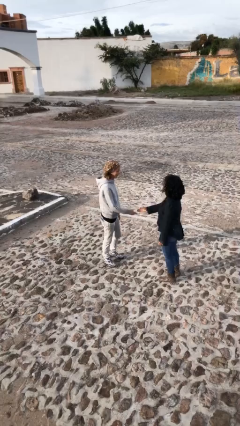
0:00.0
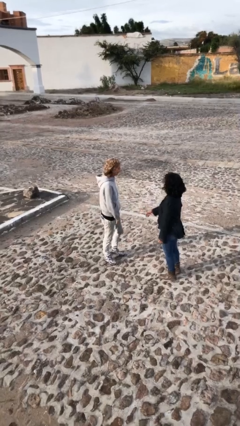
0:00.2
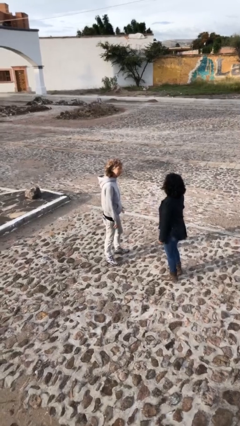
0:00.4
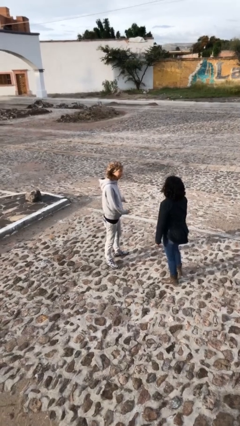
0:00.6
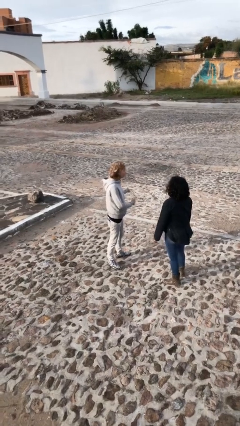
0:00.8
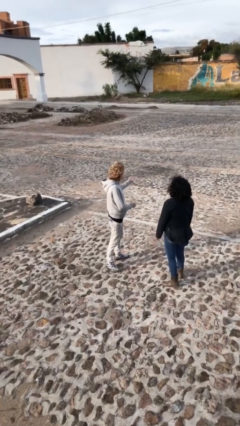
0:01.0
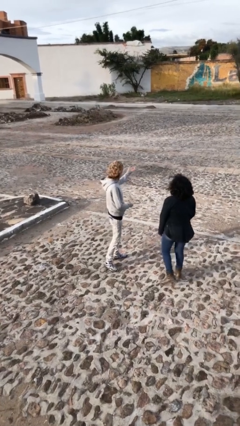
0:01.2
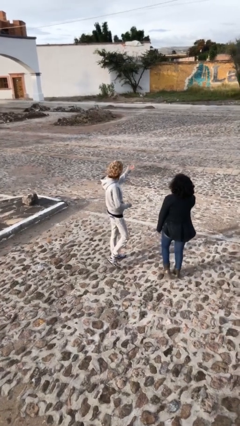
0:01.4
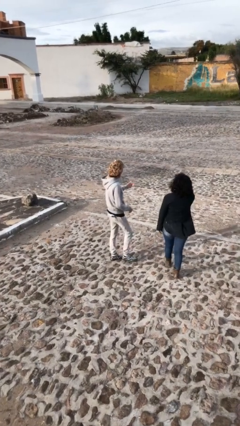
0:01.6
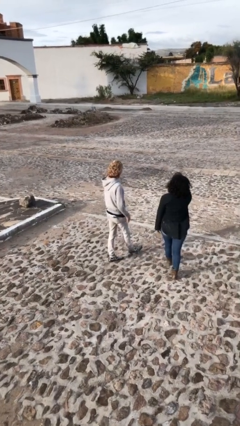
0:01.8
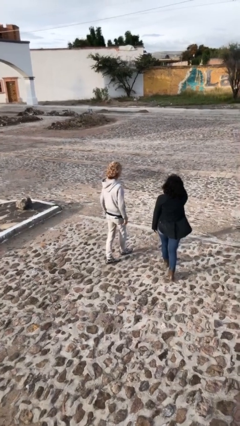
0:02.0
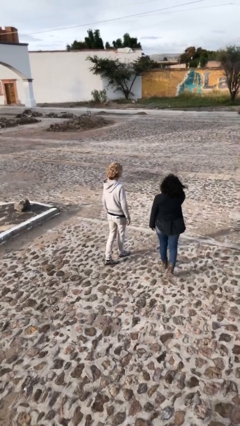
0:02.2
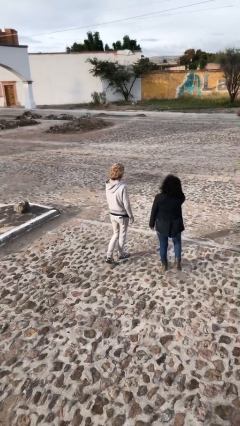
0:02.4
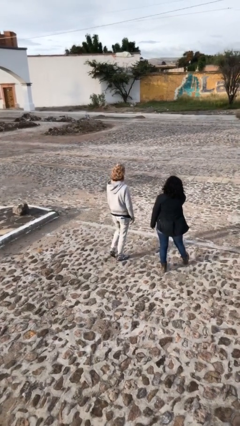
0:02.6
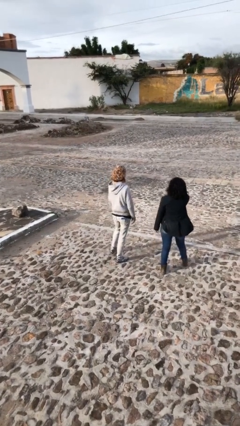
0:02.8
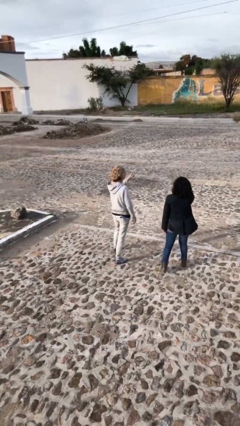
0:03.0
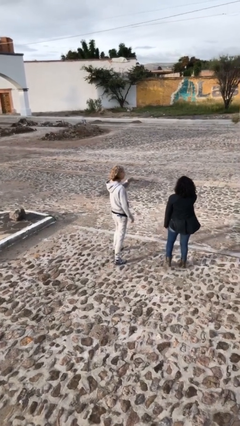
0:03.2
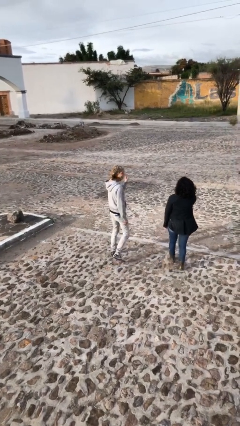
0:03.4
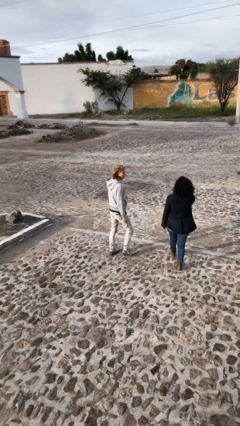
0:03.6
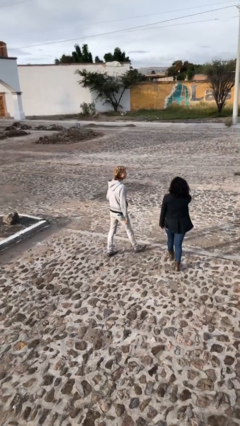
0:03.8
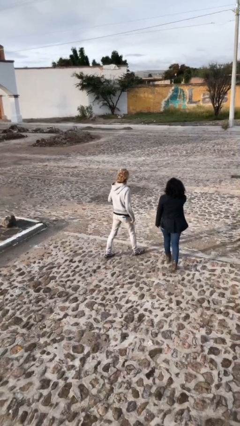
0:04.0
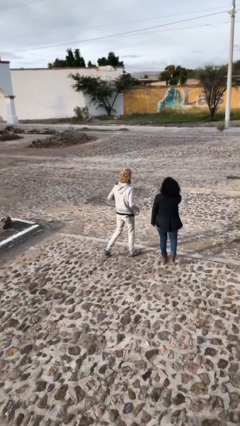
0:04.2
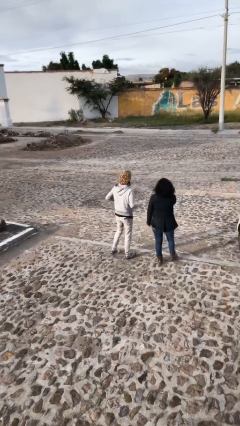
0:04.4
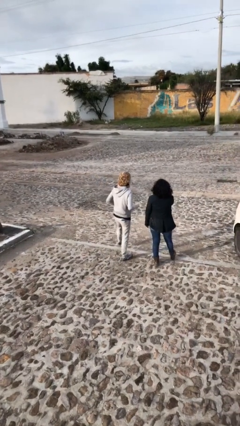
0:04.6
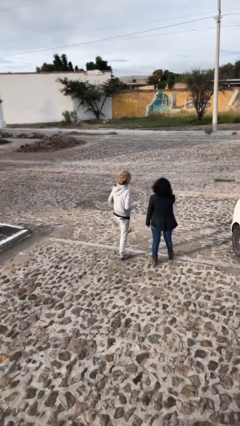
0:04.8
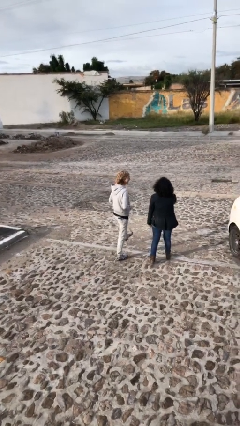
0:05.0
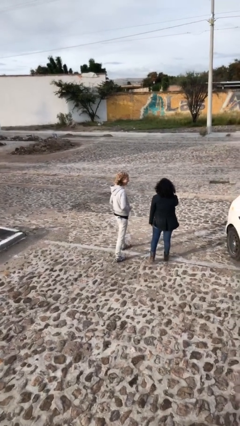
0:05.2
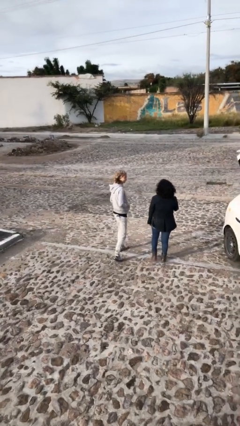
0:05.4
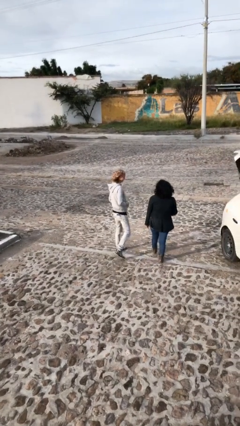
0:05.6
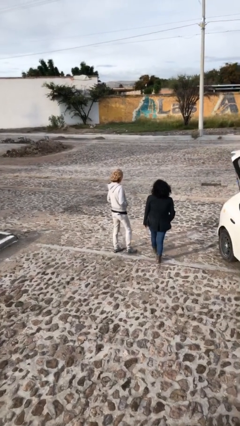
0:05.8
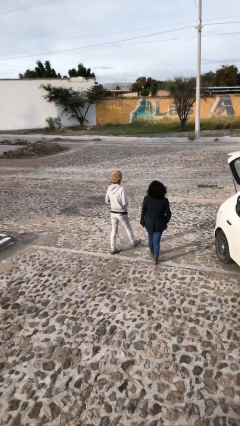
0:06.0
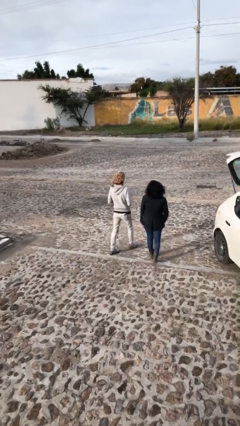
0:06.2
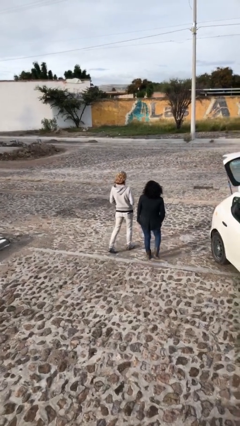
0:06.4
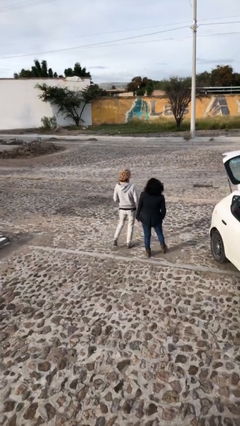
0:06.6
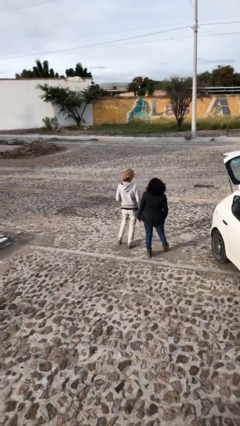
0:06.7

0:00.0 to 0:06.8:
person talks to person

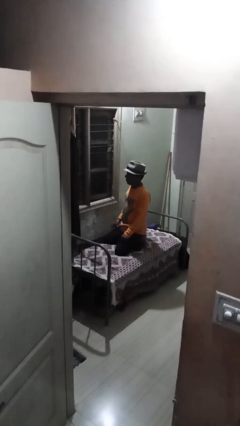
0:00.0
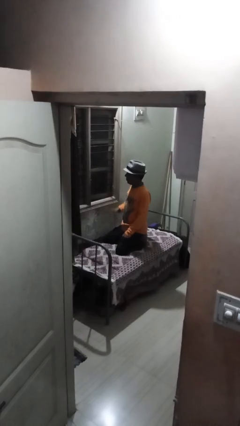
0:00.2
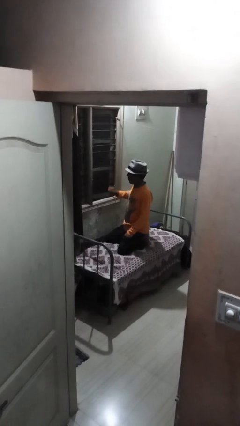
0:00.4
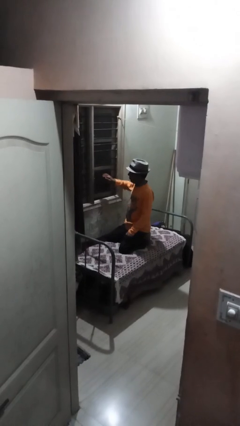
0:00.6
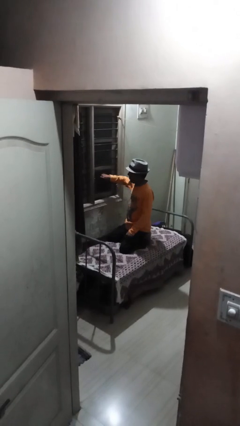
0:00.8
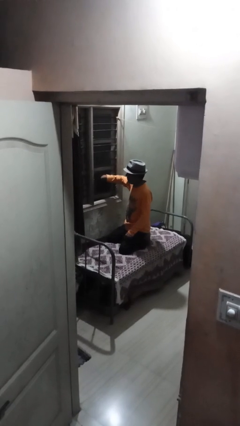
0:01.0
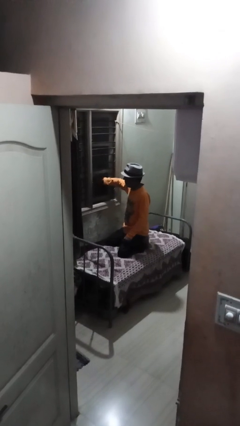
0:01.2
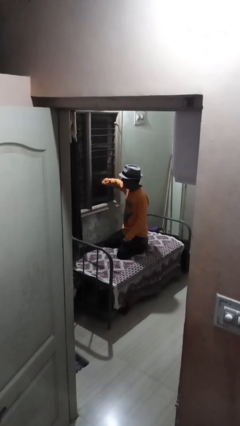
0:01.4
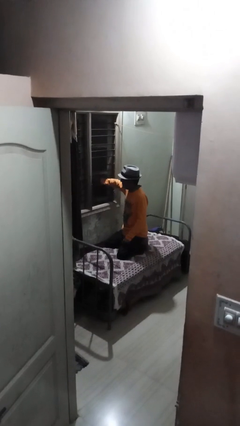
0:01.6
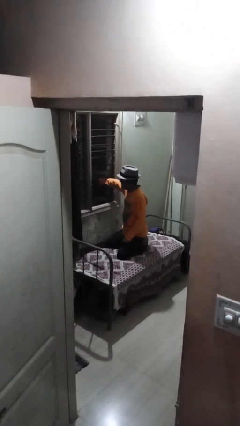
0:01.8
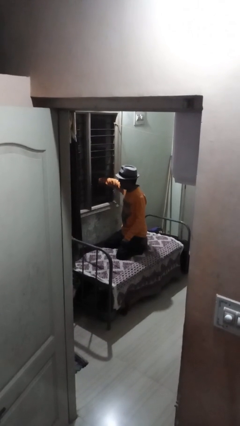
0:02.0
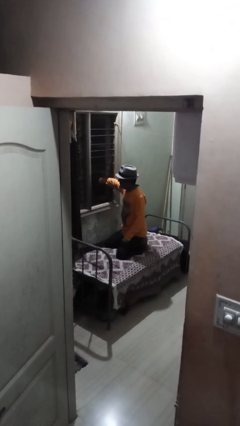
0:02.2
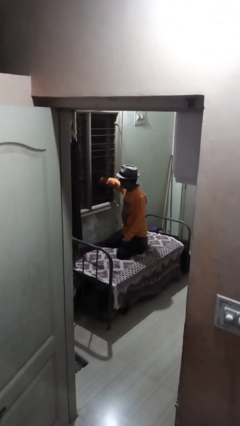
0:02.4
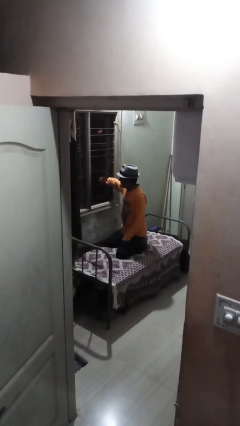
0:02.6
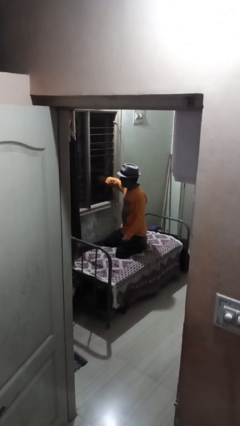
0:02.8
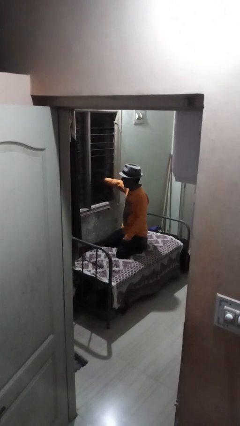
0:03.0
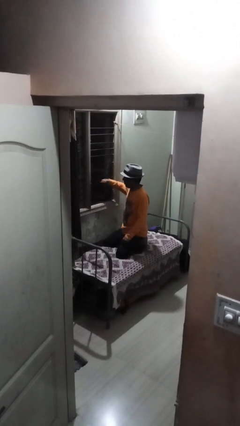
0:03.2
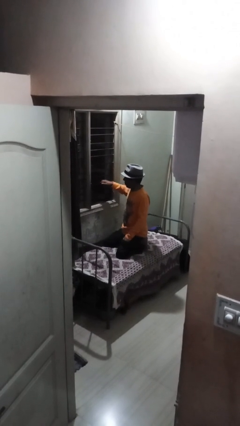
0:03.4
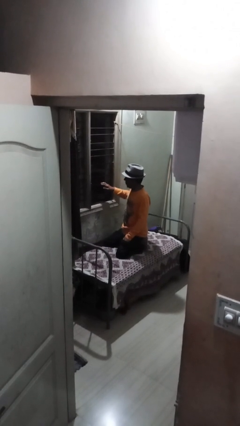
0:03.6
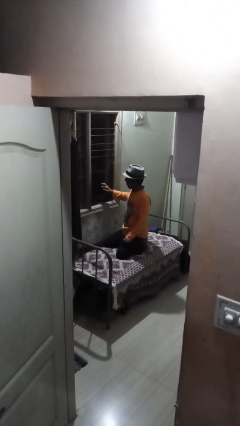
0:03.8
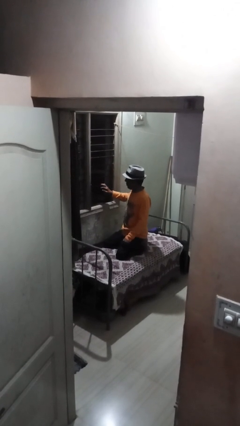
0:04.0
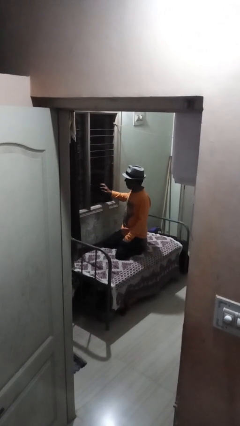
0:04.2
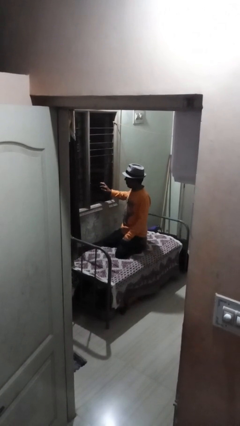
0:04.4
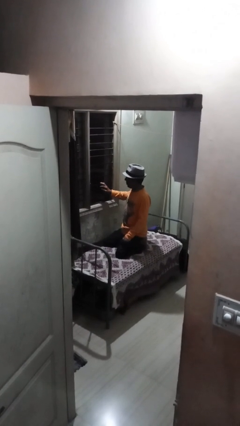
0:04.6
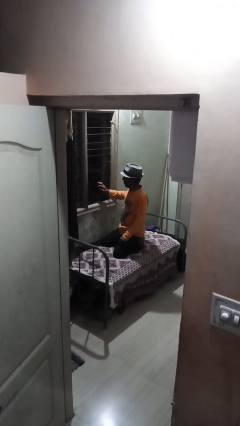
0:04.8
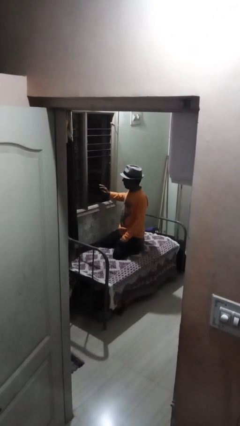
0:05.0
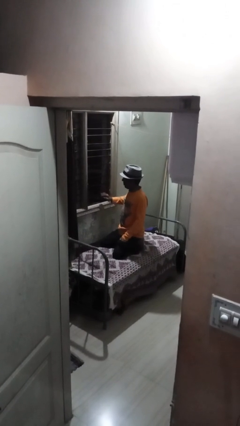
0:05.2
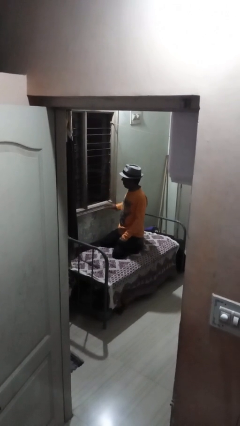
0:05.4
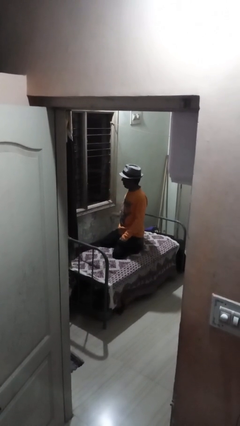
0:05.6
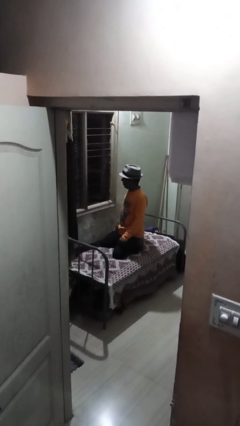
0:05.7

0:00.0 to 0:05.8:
person opens home window

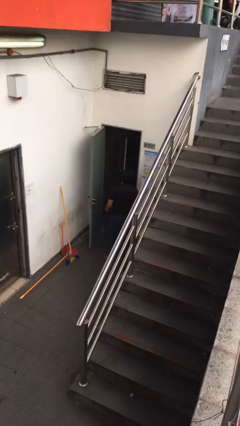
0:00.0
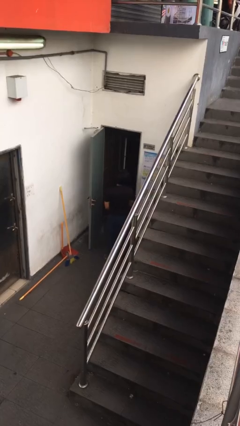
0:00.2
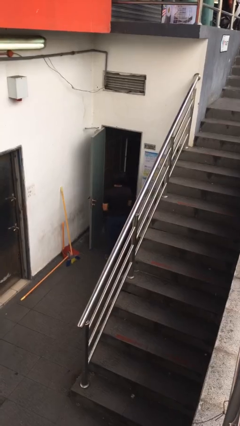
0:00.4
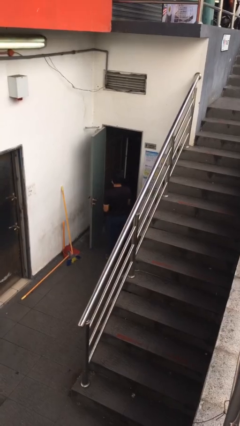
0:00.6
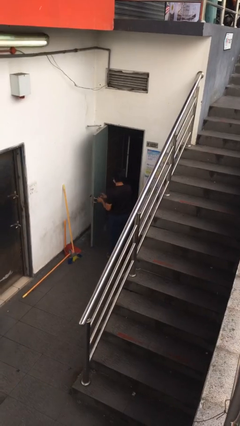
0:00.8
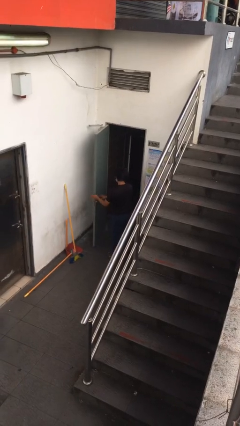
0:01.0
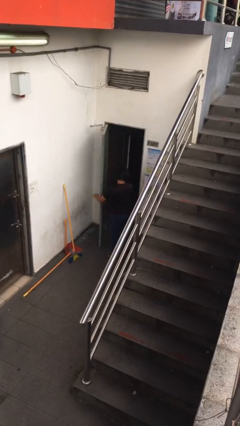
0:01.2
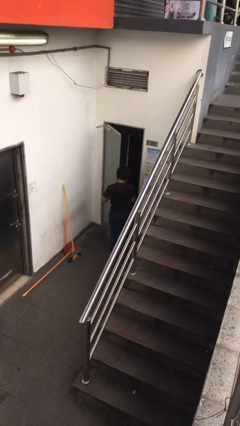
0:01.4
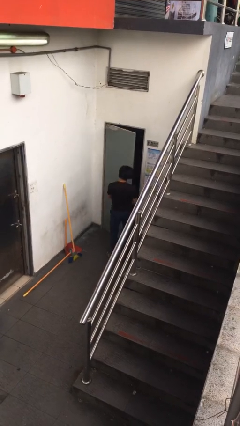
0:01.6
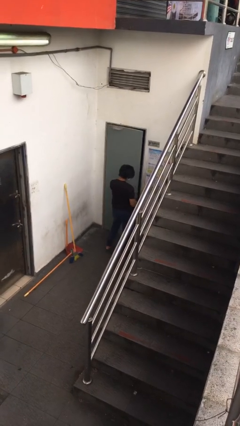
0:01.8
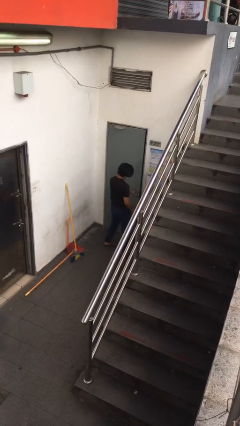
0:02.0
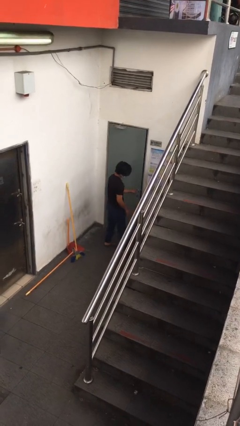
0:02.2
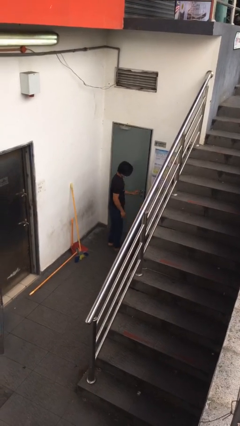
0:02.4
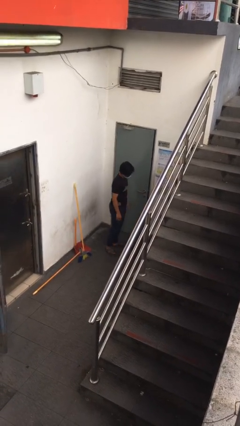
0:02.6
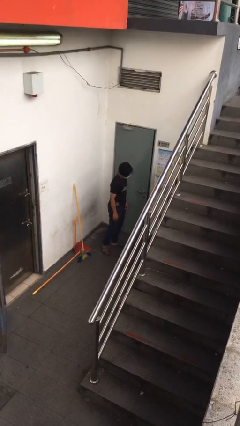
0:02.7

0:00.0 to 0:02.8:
person closes facility door

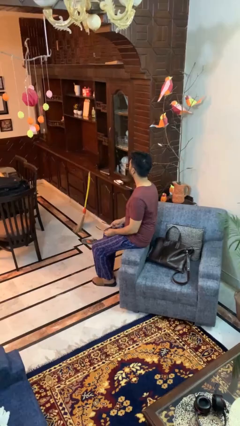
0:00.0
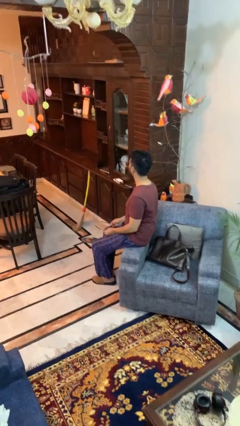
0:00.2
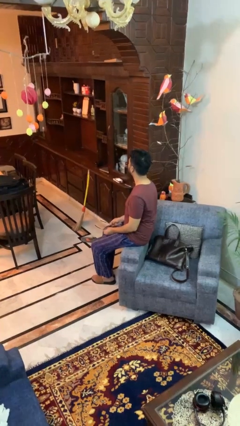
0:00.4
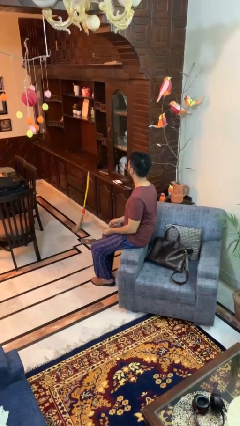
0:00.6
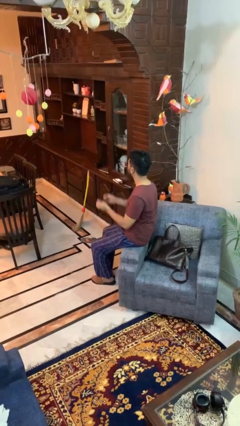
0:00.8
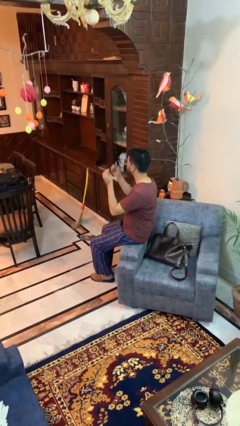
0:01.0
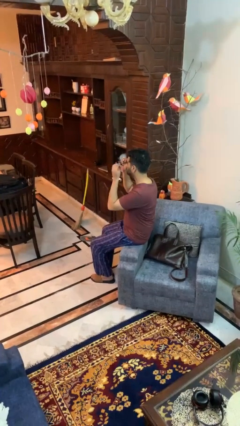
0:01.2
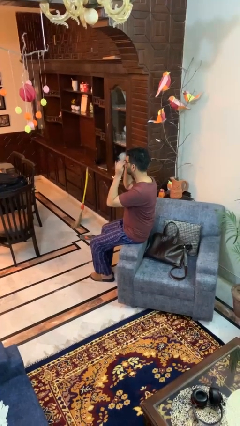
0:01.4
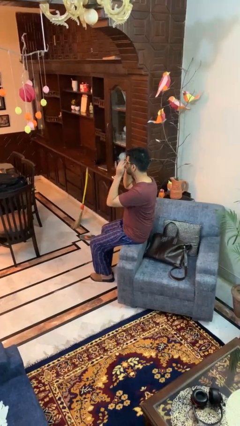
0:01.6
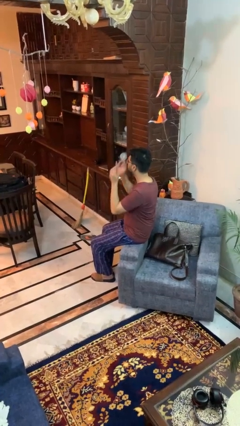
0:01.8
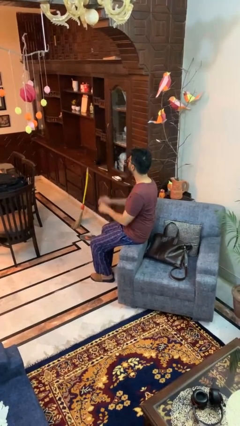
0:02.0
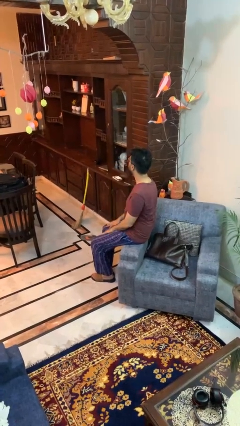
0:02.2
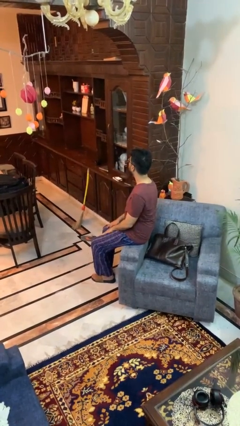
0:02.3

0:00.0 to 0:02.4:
person puts on glasses
